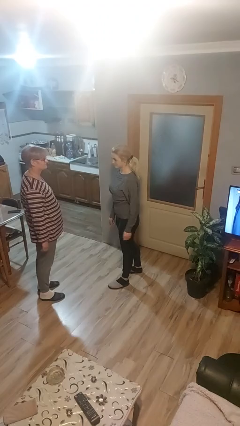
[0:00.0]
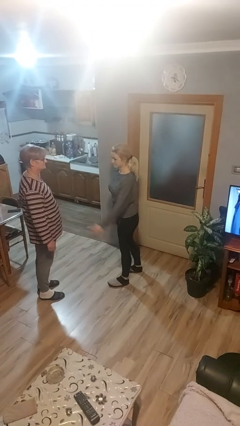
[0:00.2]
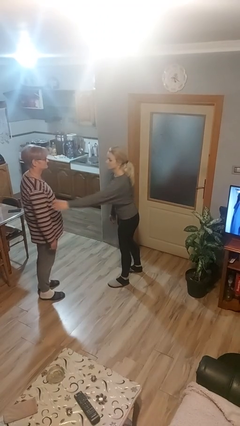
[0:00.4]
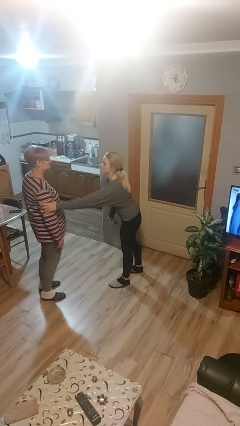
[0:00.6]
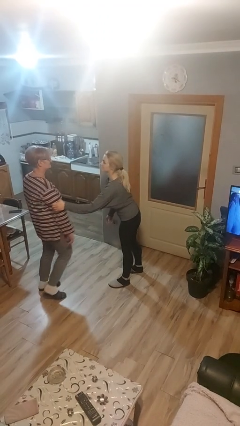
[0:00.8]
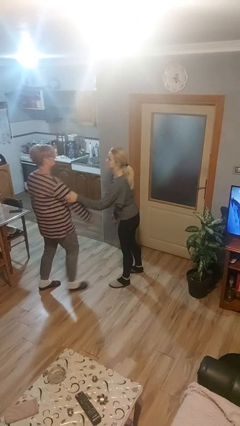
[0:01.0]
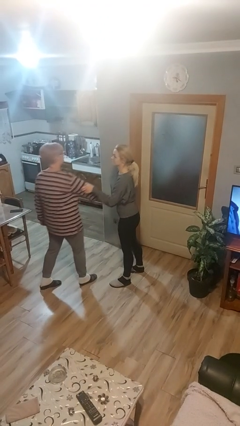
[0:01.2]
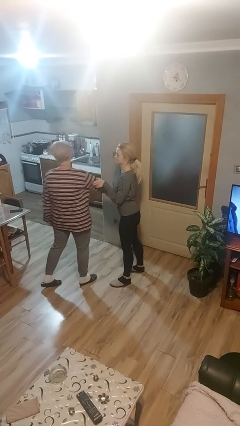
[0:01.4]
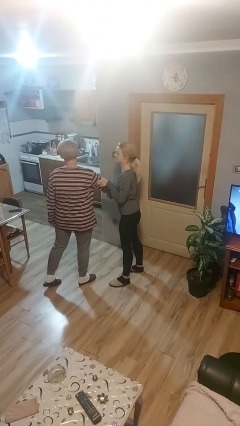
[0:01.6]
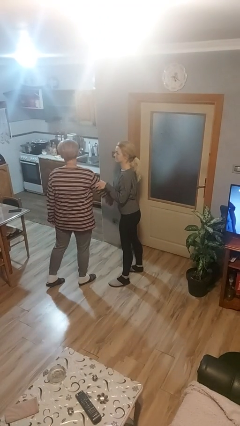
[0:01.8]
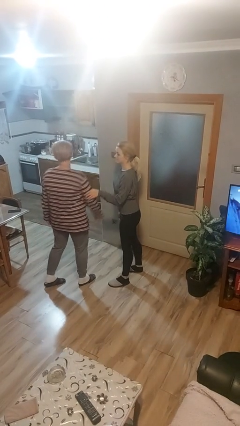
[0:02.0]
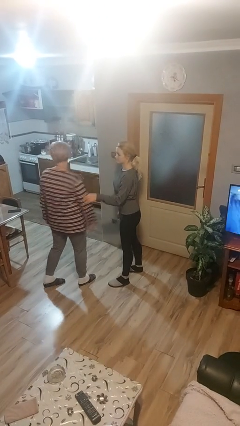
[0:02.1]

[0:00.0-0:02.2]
person grabs person by bicep

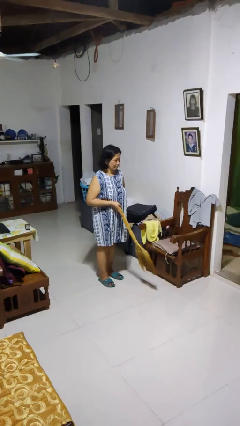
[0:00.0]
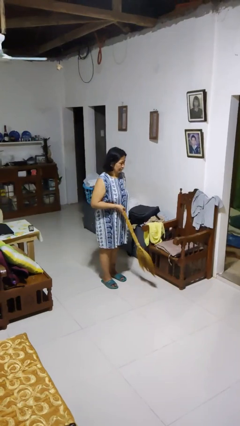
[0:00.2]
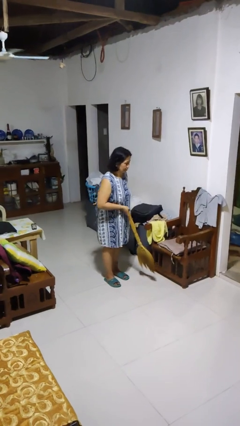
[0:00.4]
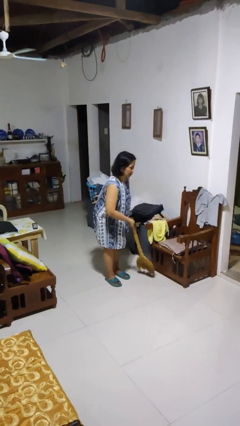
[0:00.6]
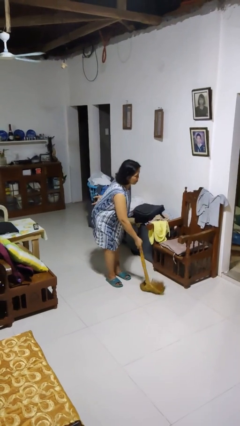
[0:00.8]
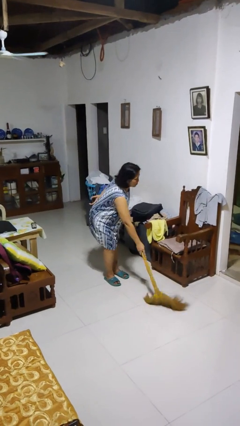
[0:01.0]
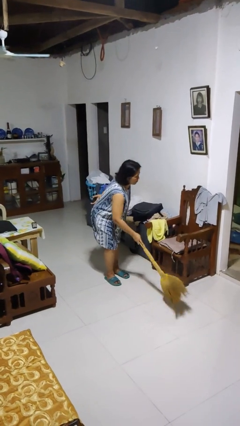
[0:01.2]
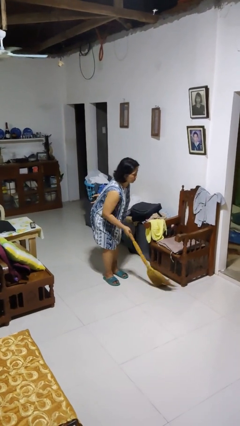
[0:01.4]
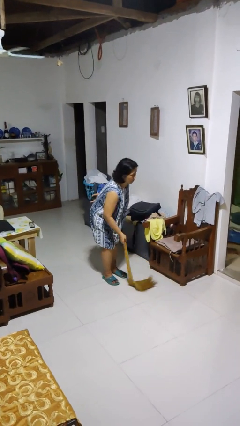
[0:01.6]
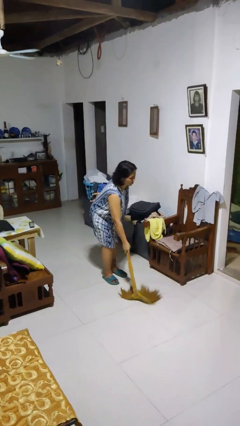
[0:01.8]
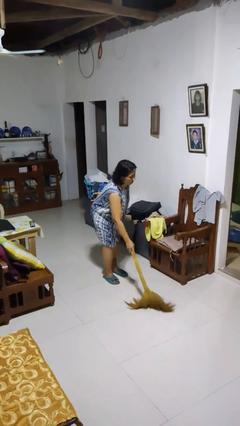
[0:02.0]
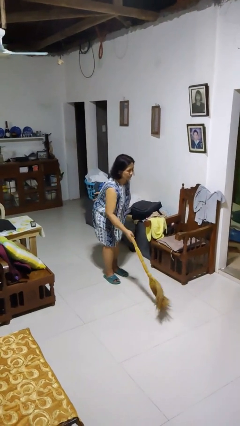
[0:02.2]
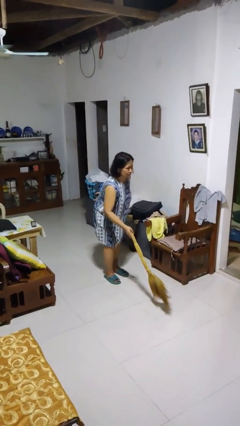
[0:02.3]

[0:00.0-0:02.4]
person sweeps floor

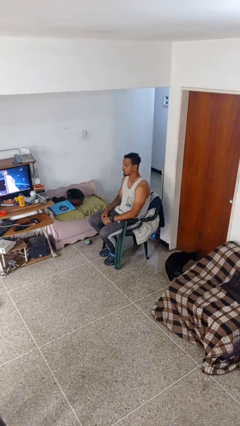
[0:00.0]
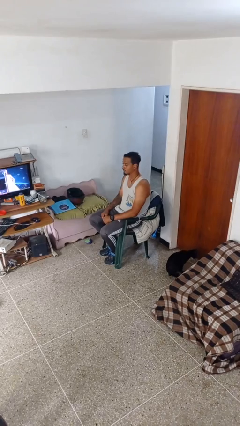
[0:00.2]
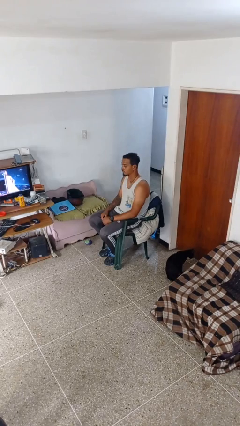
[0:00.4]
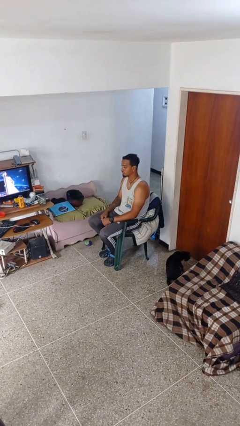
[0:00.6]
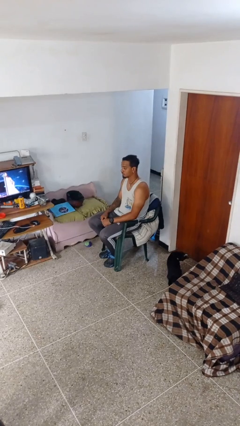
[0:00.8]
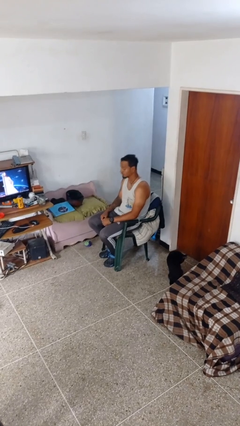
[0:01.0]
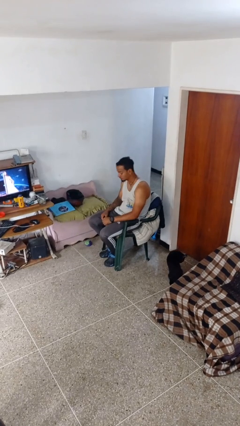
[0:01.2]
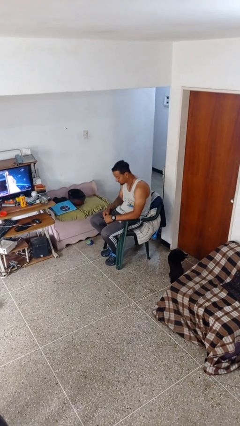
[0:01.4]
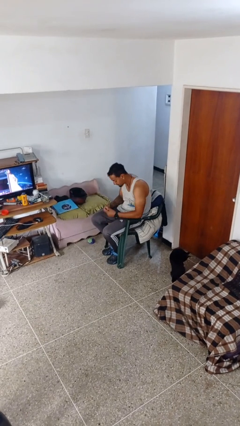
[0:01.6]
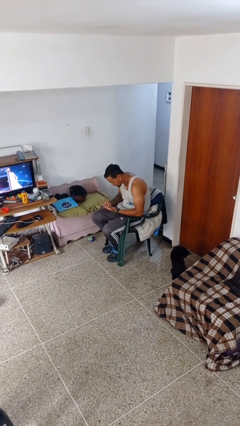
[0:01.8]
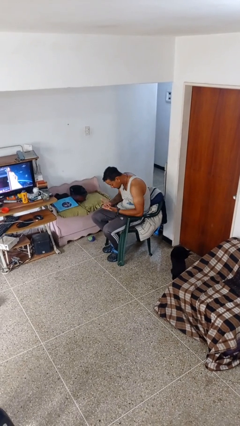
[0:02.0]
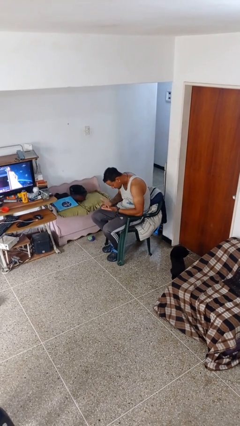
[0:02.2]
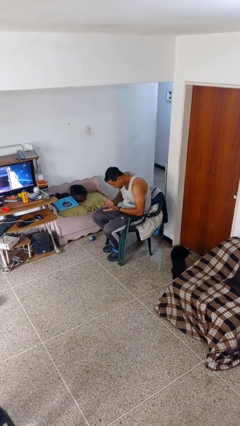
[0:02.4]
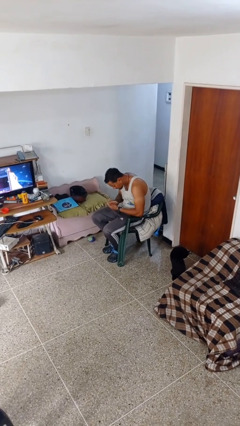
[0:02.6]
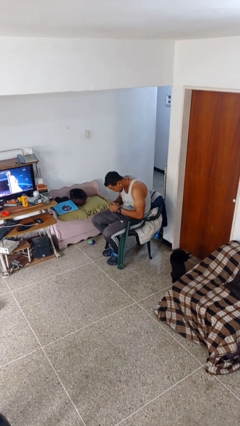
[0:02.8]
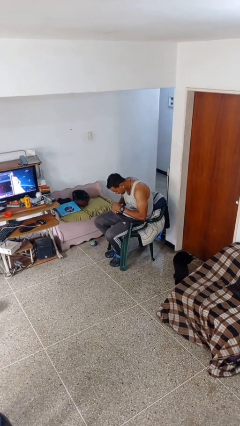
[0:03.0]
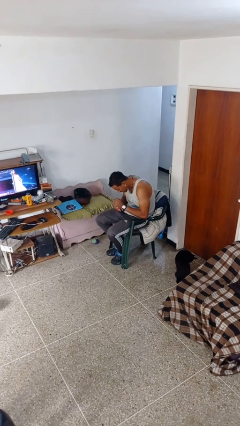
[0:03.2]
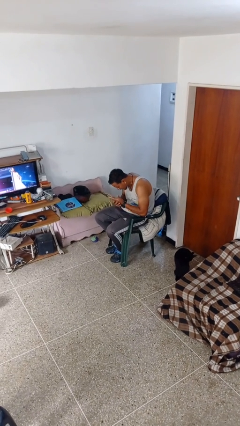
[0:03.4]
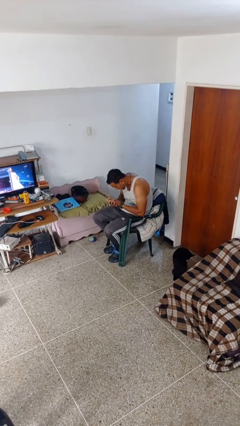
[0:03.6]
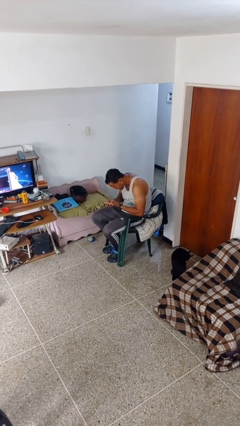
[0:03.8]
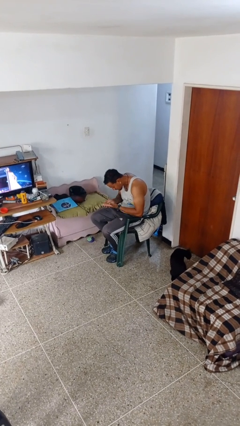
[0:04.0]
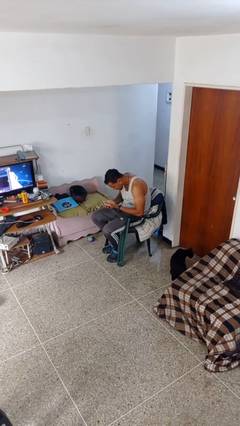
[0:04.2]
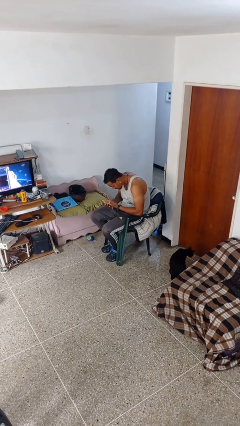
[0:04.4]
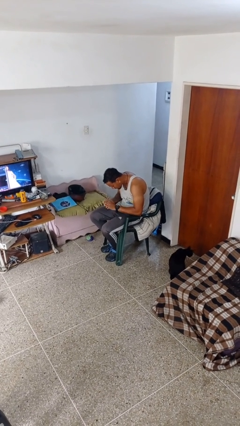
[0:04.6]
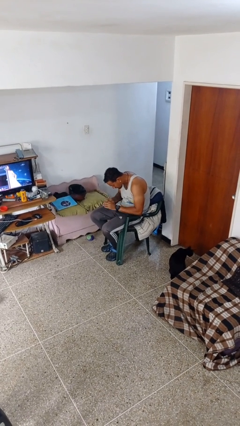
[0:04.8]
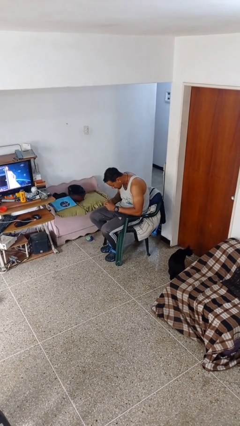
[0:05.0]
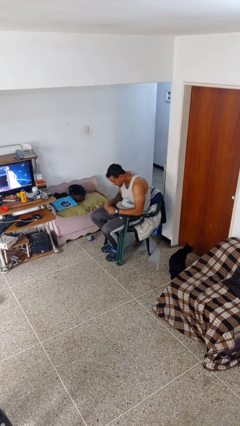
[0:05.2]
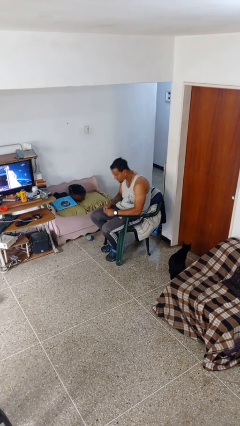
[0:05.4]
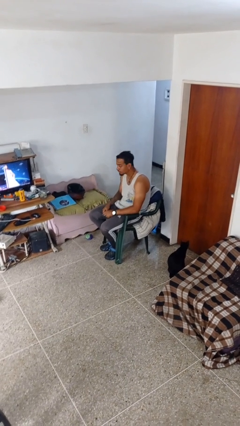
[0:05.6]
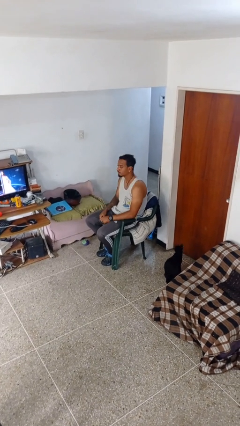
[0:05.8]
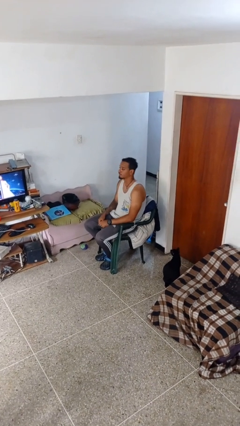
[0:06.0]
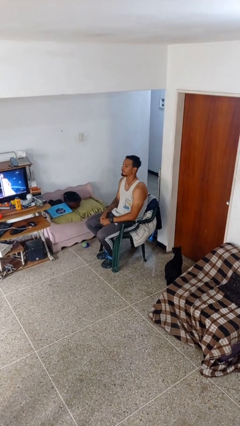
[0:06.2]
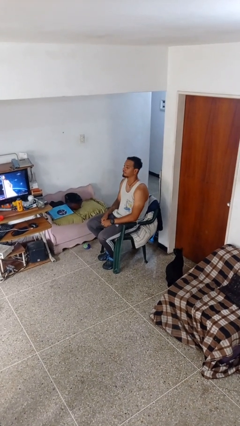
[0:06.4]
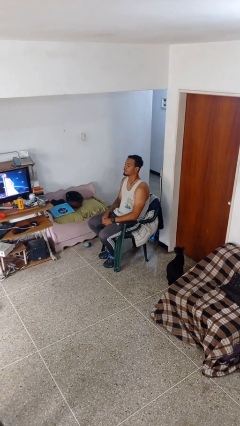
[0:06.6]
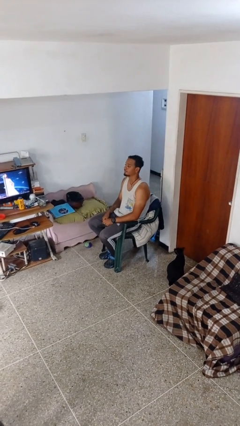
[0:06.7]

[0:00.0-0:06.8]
person looks at hands in lap

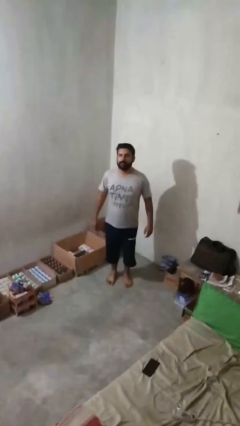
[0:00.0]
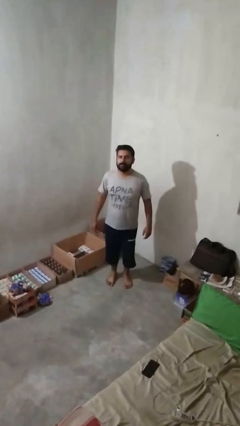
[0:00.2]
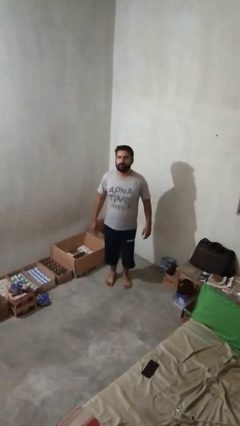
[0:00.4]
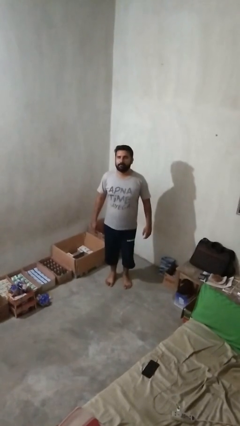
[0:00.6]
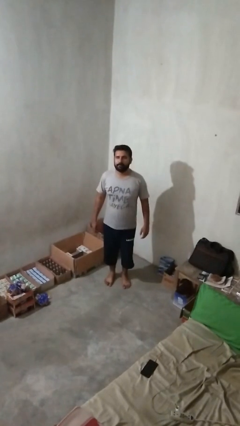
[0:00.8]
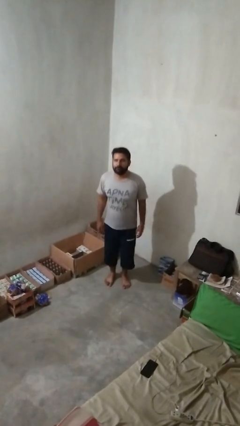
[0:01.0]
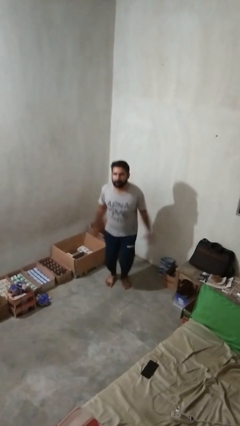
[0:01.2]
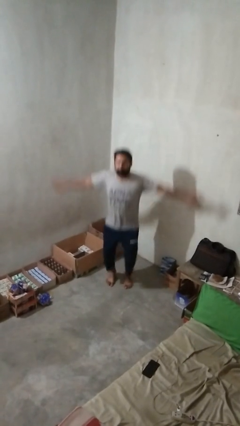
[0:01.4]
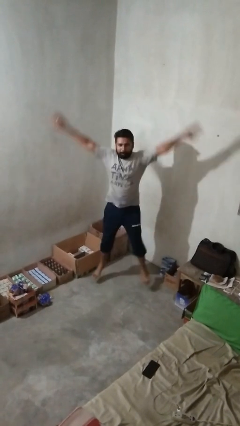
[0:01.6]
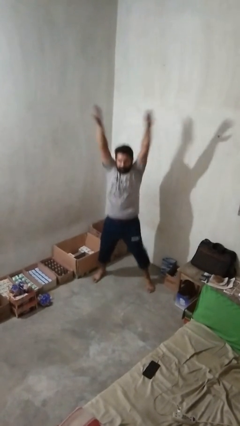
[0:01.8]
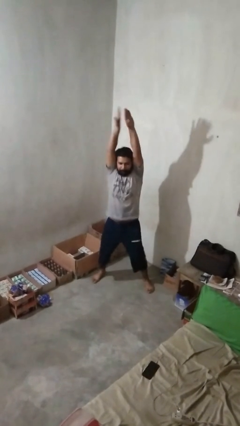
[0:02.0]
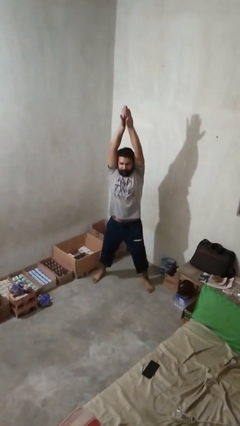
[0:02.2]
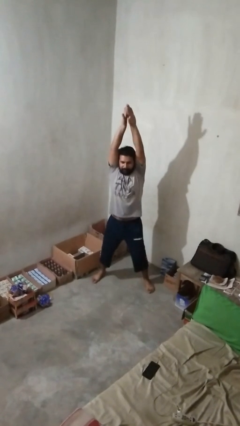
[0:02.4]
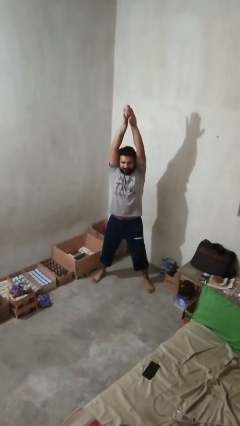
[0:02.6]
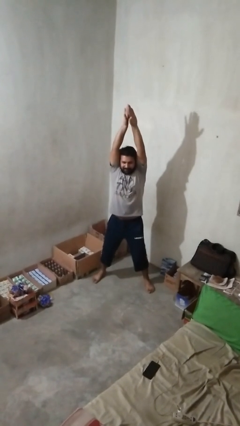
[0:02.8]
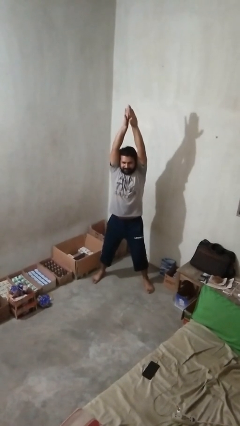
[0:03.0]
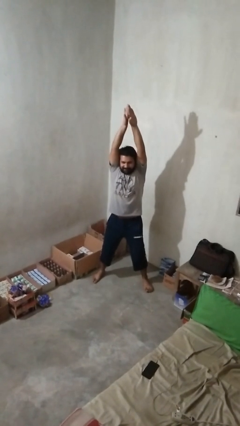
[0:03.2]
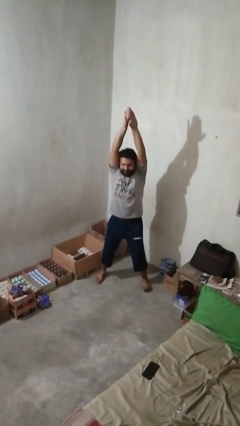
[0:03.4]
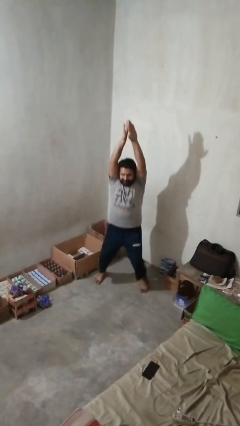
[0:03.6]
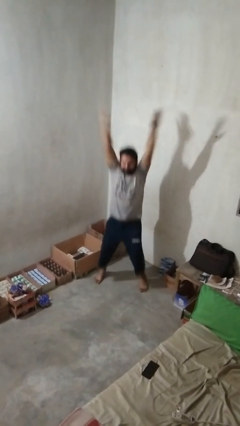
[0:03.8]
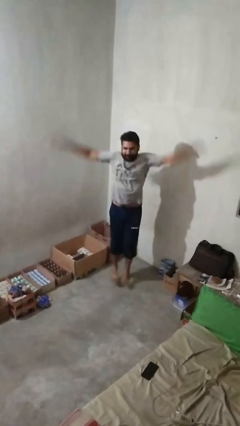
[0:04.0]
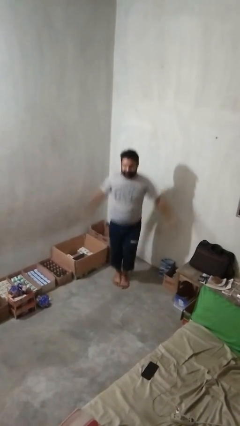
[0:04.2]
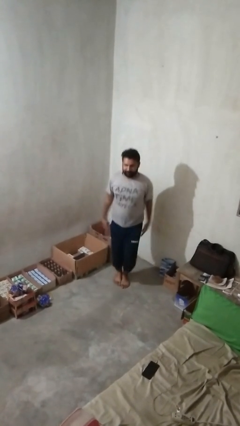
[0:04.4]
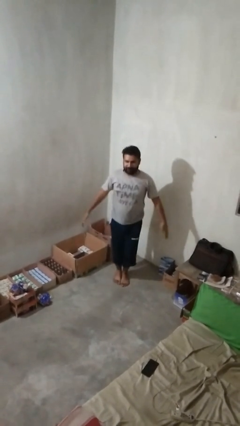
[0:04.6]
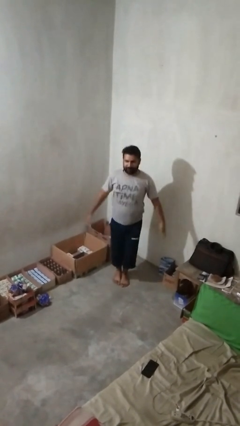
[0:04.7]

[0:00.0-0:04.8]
person exercises with jumping jacks

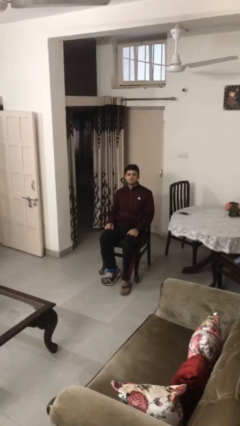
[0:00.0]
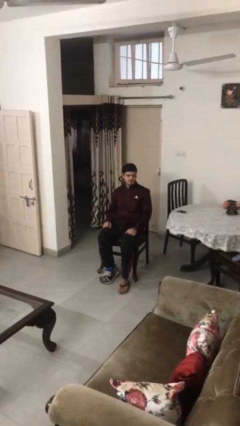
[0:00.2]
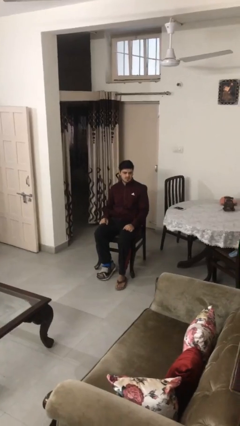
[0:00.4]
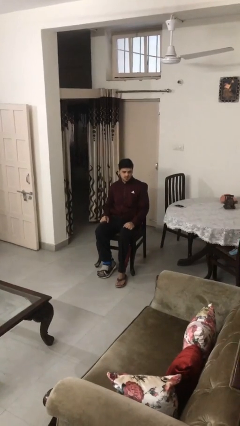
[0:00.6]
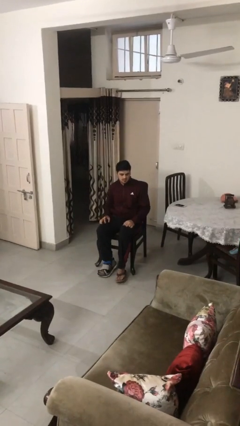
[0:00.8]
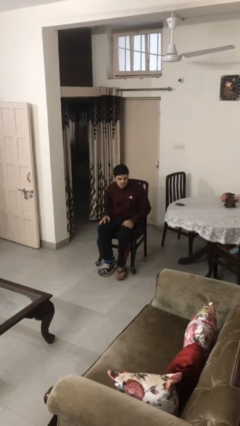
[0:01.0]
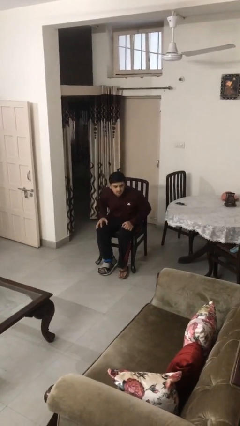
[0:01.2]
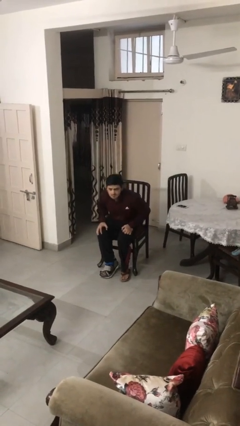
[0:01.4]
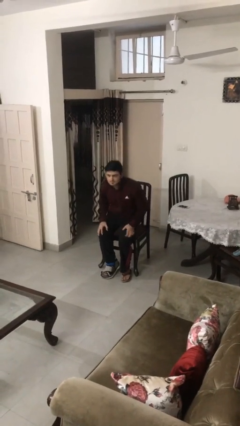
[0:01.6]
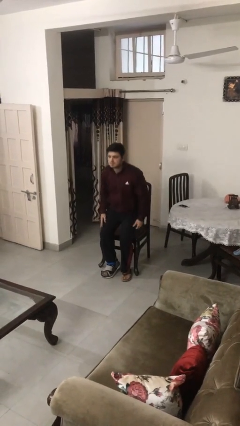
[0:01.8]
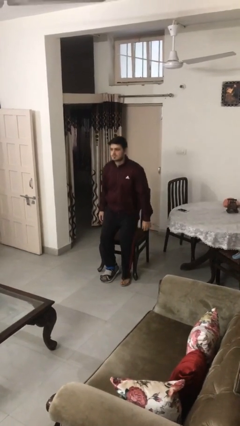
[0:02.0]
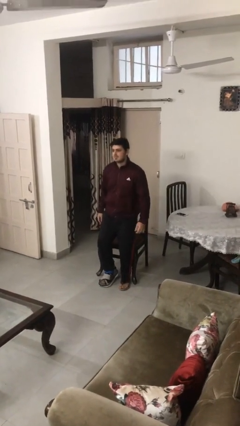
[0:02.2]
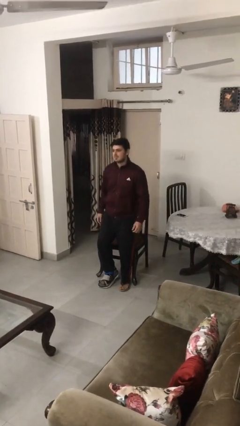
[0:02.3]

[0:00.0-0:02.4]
person stands up
